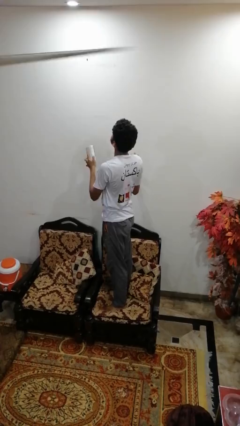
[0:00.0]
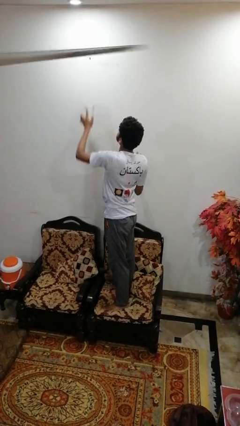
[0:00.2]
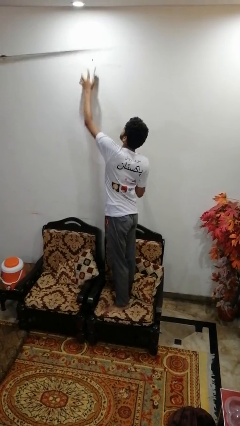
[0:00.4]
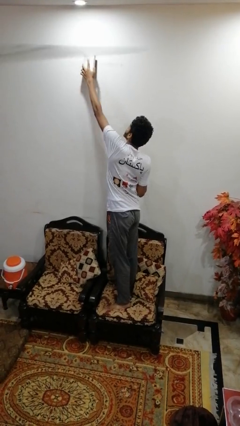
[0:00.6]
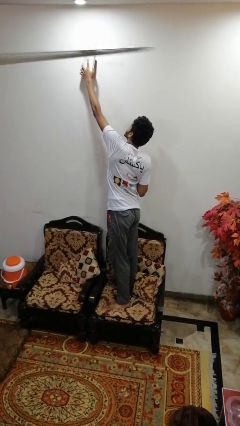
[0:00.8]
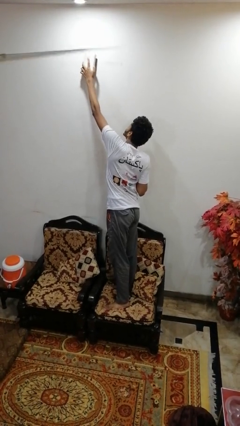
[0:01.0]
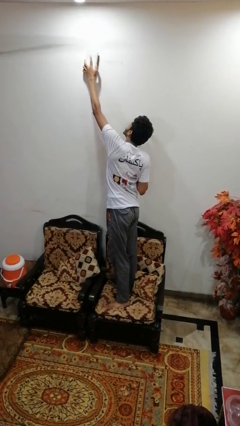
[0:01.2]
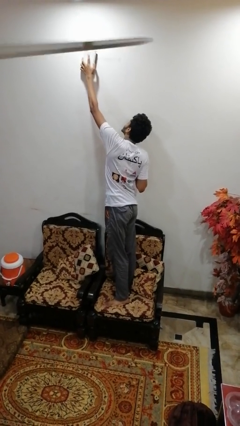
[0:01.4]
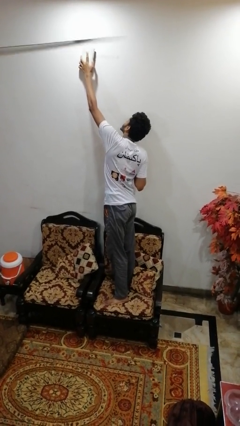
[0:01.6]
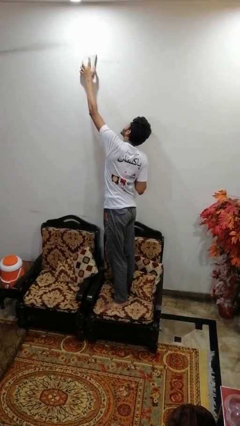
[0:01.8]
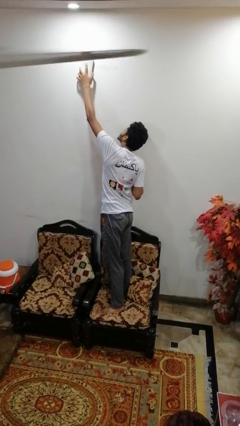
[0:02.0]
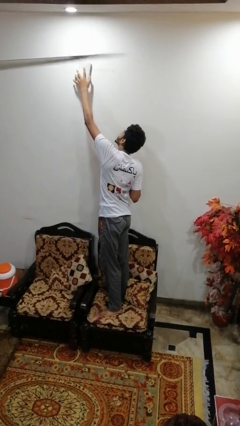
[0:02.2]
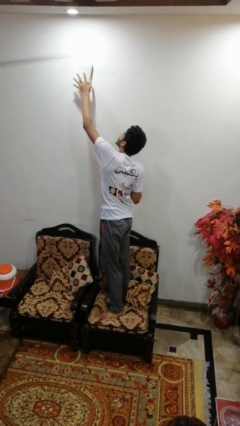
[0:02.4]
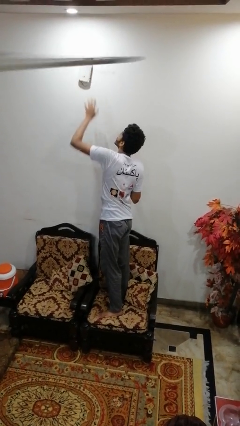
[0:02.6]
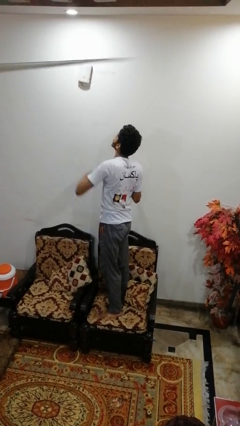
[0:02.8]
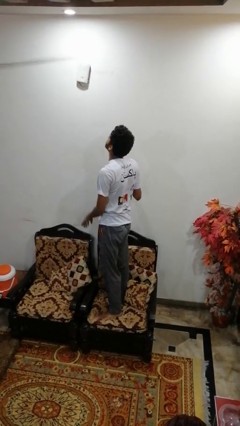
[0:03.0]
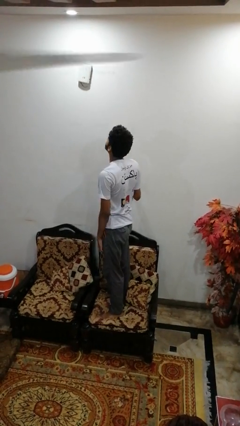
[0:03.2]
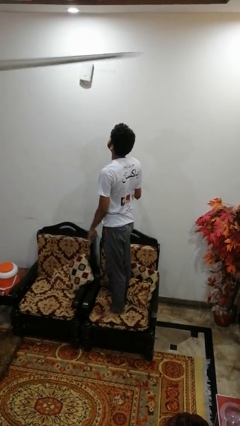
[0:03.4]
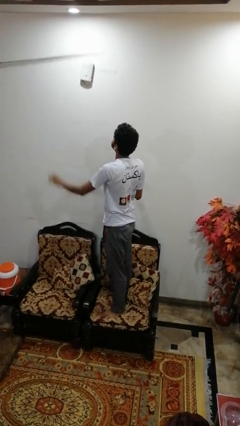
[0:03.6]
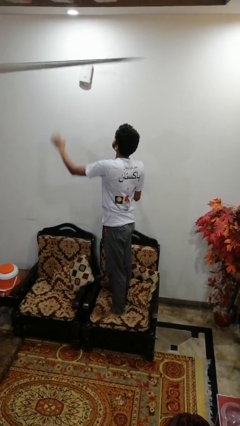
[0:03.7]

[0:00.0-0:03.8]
person puts up smoke detector

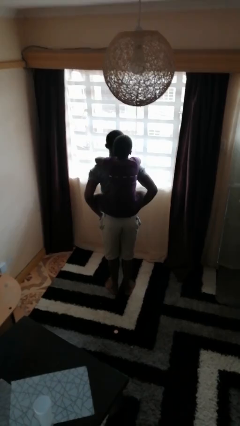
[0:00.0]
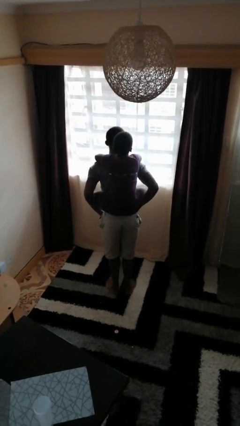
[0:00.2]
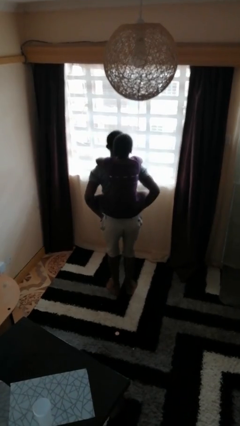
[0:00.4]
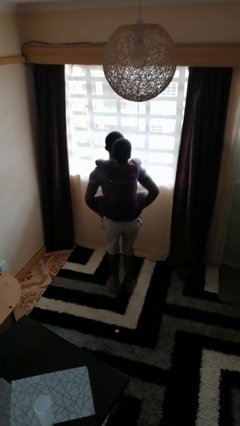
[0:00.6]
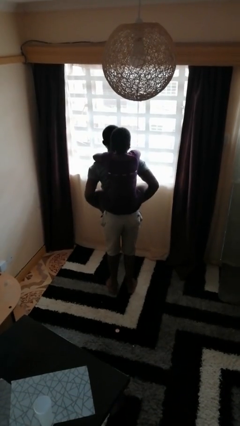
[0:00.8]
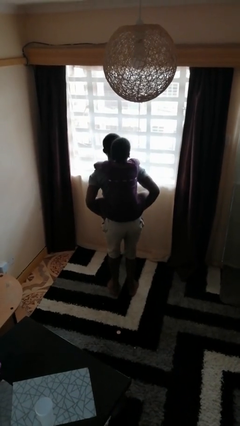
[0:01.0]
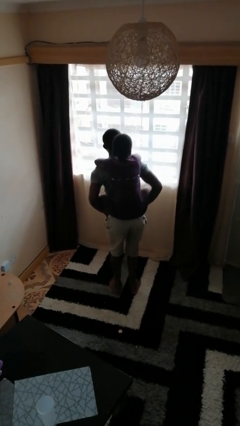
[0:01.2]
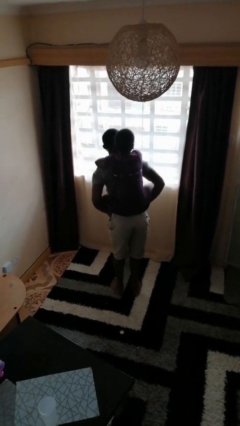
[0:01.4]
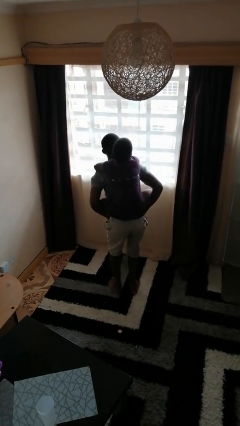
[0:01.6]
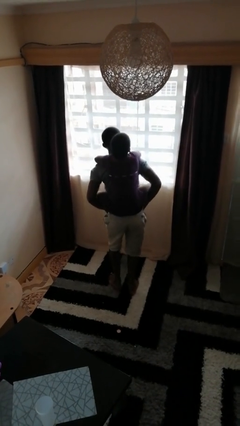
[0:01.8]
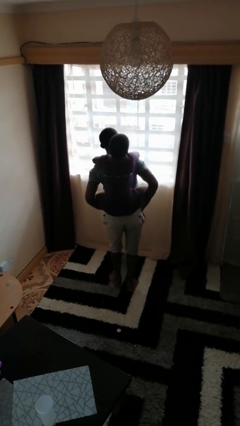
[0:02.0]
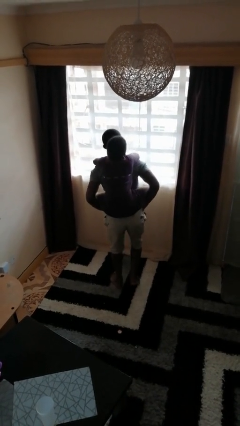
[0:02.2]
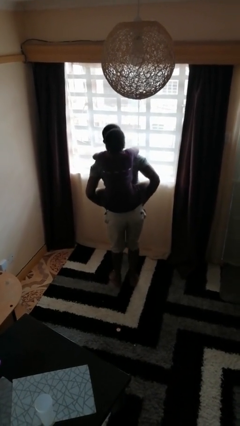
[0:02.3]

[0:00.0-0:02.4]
person carries person on back

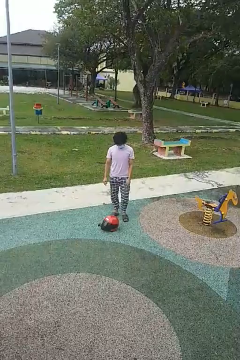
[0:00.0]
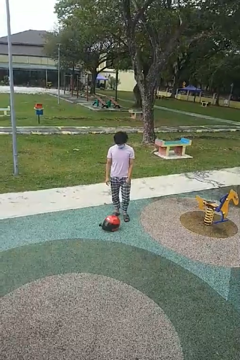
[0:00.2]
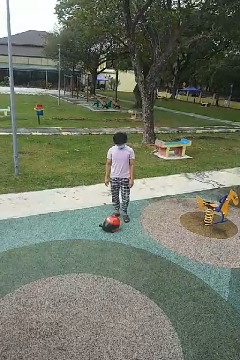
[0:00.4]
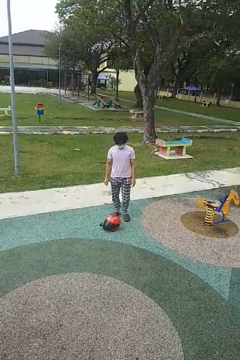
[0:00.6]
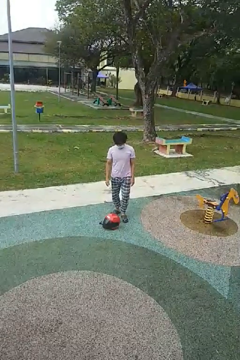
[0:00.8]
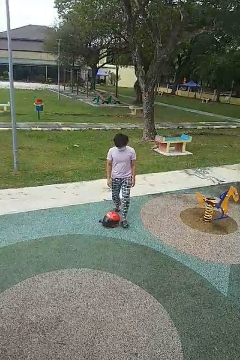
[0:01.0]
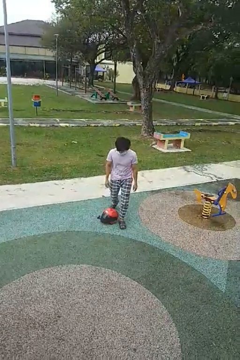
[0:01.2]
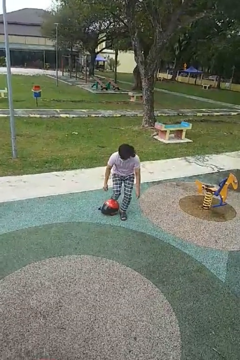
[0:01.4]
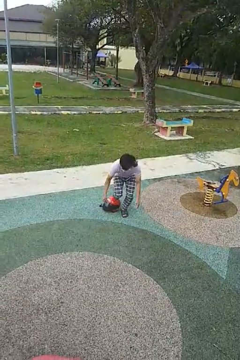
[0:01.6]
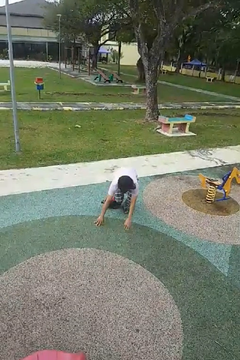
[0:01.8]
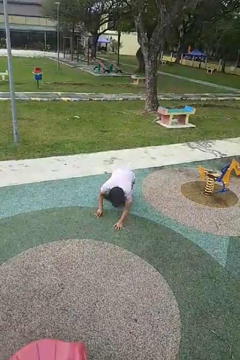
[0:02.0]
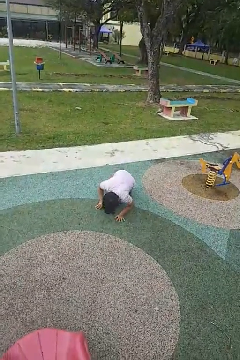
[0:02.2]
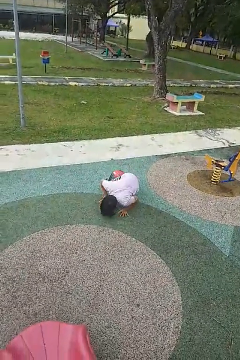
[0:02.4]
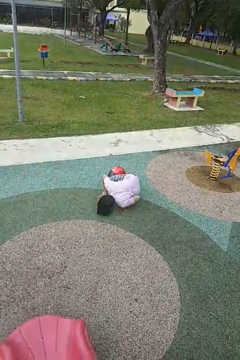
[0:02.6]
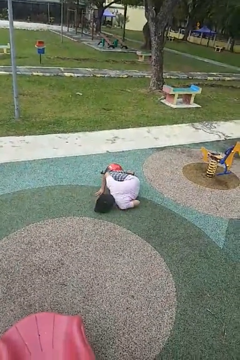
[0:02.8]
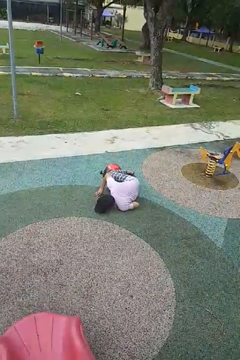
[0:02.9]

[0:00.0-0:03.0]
person trips on object on floor

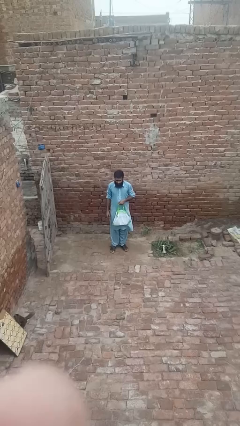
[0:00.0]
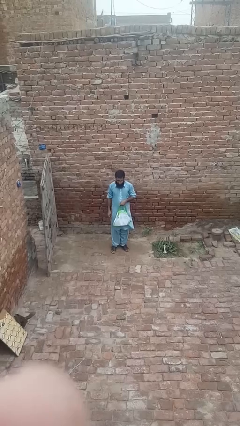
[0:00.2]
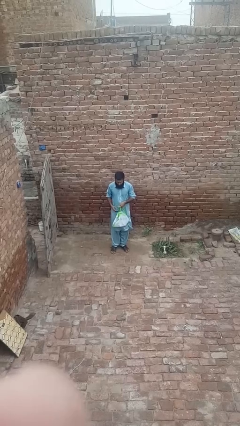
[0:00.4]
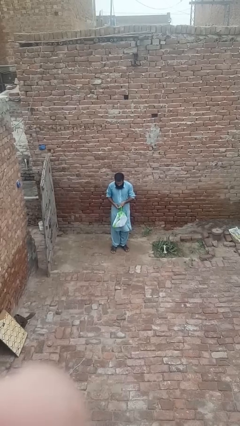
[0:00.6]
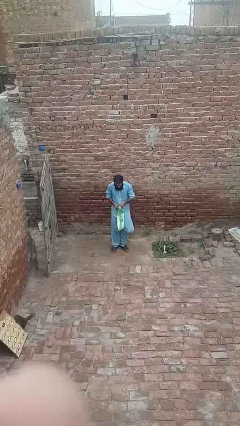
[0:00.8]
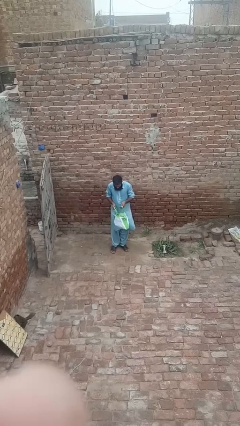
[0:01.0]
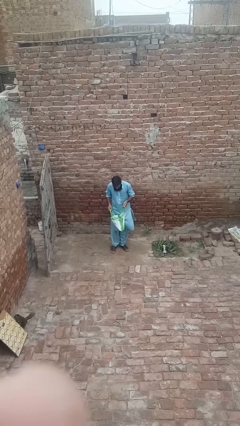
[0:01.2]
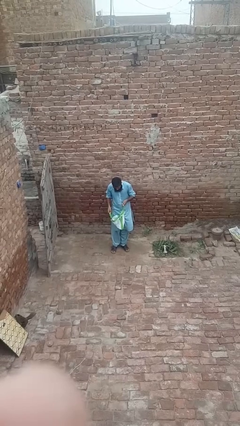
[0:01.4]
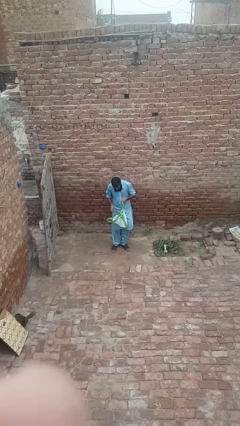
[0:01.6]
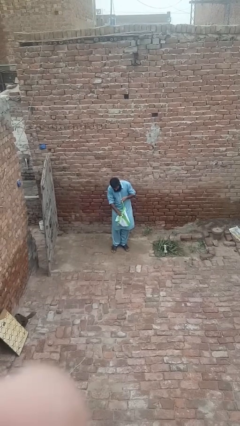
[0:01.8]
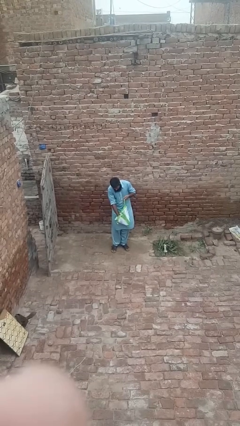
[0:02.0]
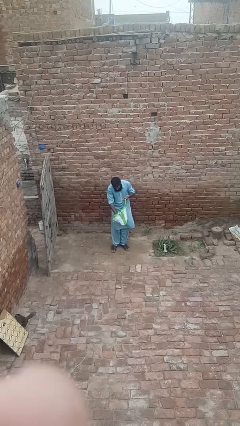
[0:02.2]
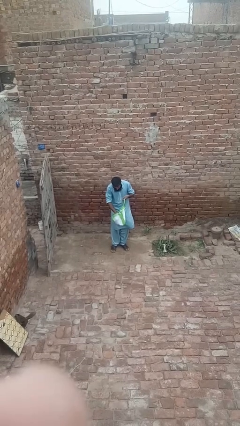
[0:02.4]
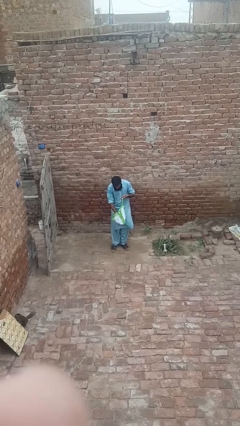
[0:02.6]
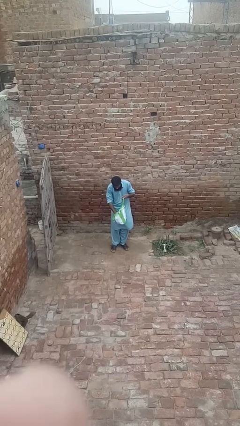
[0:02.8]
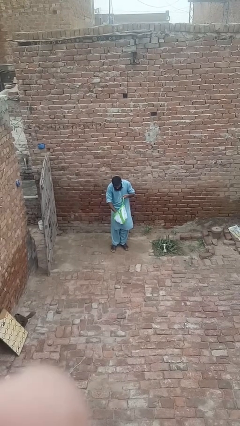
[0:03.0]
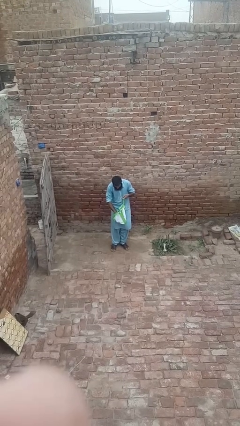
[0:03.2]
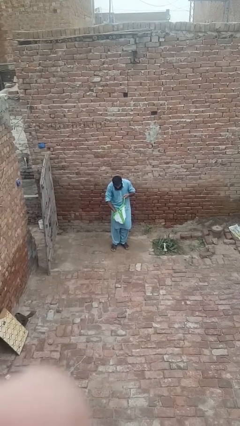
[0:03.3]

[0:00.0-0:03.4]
person searches in bag

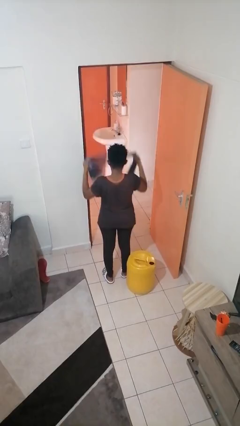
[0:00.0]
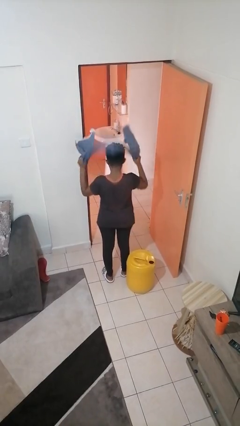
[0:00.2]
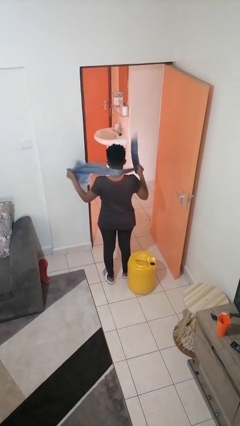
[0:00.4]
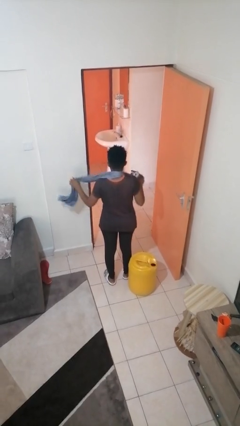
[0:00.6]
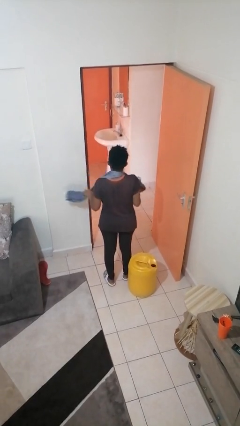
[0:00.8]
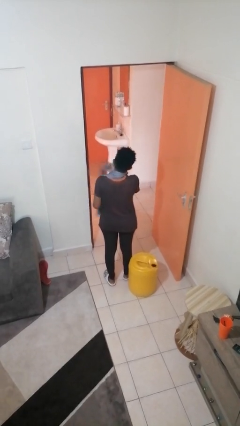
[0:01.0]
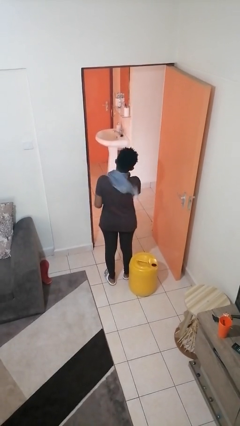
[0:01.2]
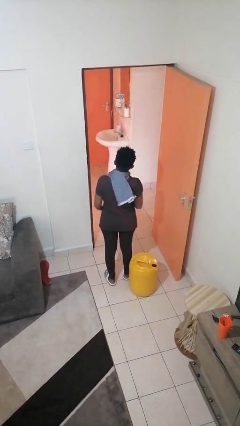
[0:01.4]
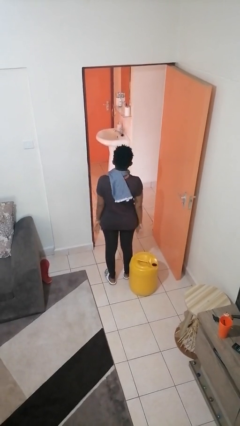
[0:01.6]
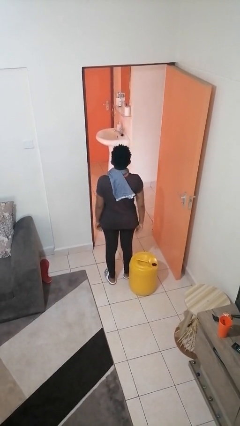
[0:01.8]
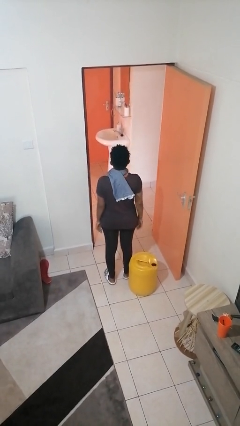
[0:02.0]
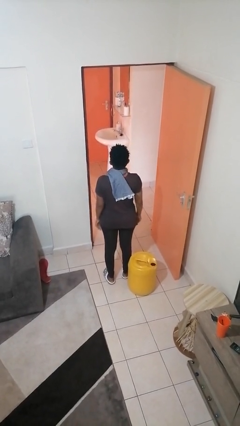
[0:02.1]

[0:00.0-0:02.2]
person puts on scarf

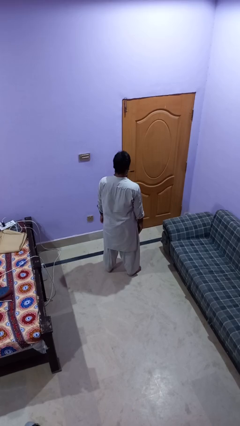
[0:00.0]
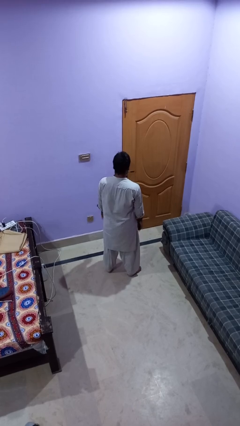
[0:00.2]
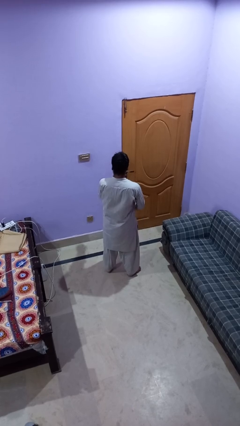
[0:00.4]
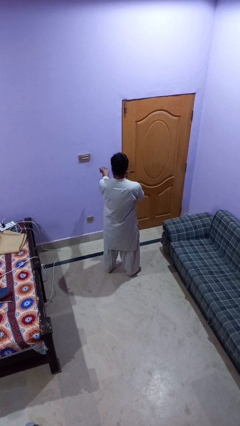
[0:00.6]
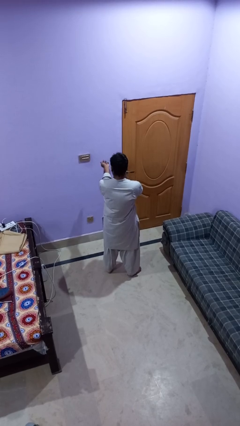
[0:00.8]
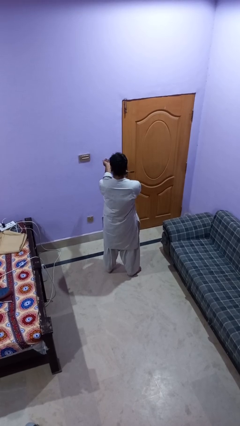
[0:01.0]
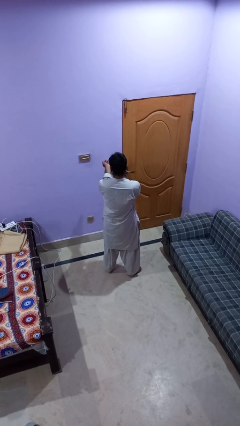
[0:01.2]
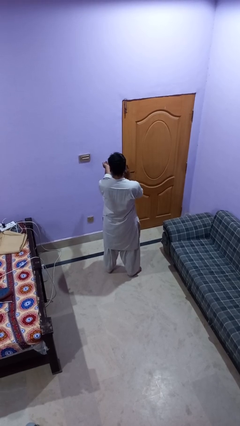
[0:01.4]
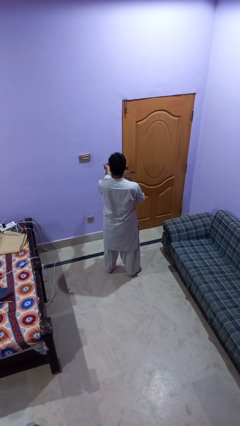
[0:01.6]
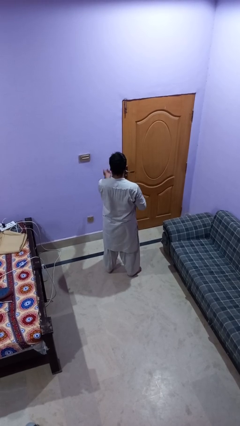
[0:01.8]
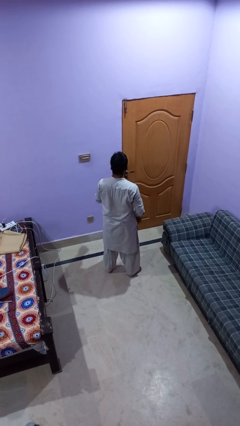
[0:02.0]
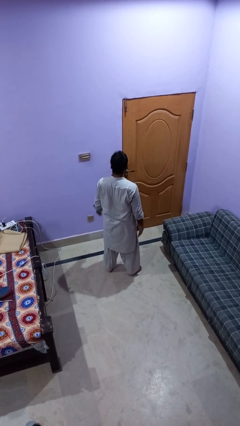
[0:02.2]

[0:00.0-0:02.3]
person swats bug

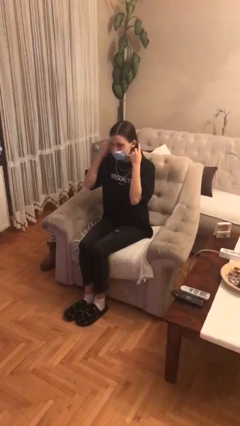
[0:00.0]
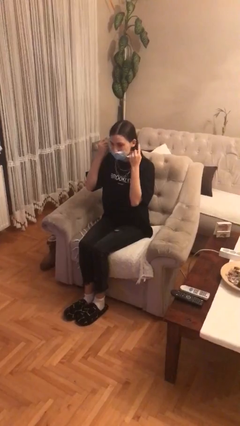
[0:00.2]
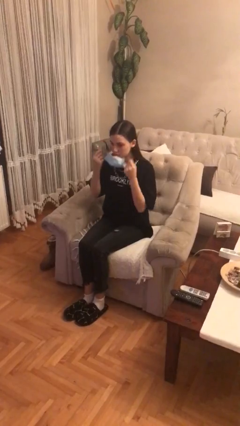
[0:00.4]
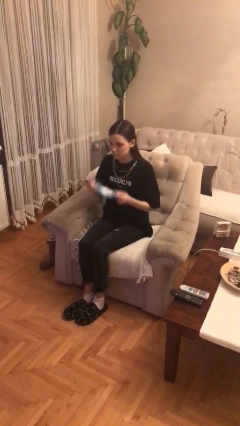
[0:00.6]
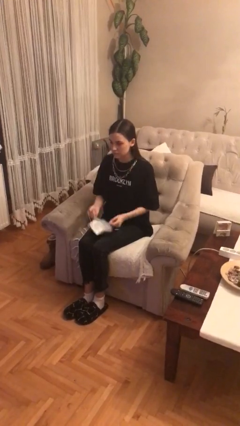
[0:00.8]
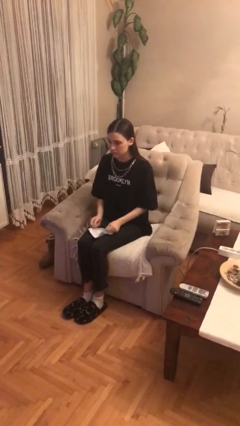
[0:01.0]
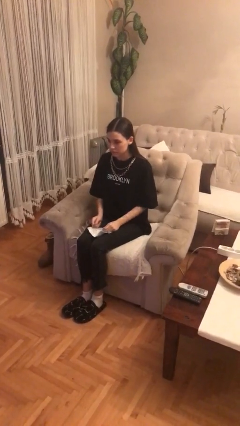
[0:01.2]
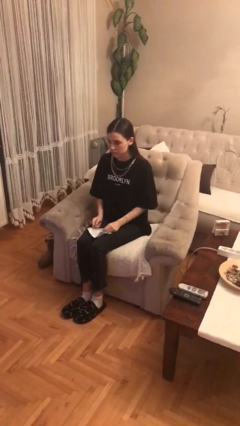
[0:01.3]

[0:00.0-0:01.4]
person takes off facemask
